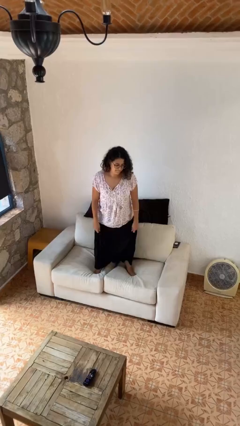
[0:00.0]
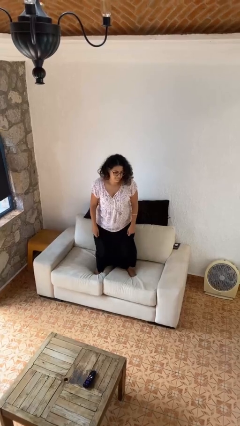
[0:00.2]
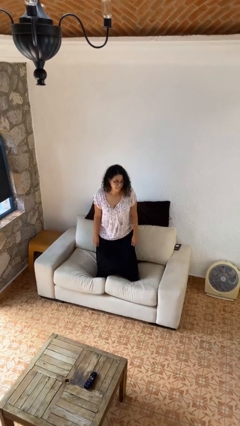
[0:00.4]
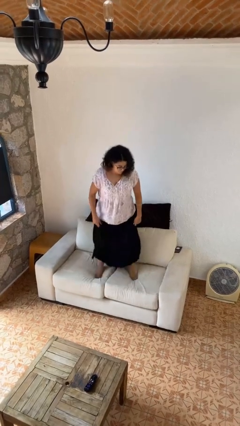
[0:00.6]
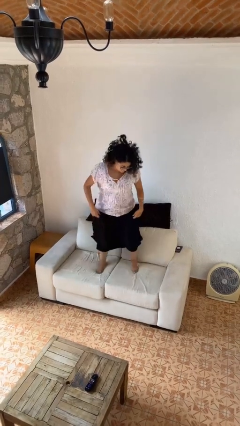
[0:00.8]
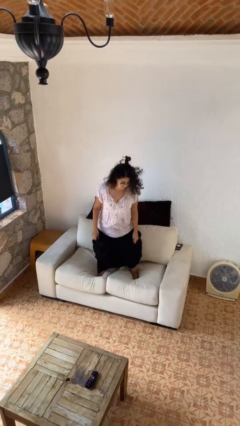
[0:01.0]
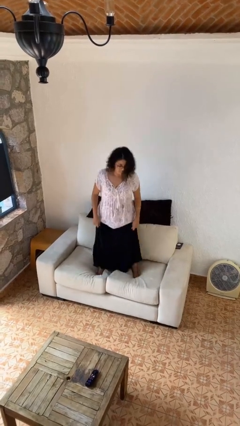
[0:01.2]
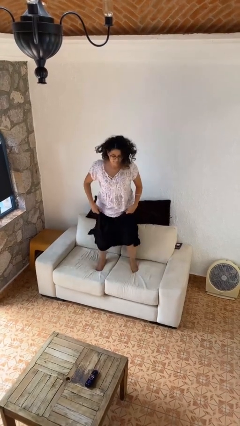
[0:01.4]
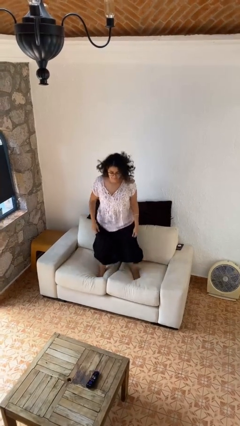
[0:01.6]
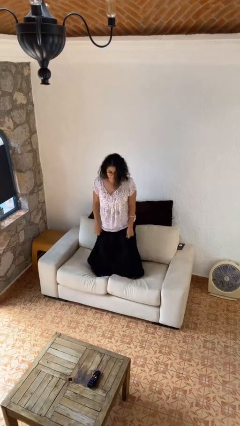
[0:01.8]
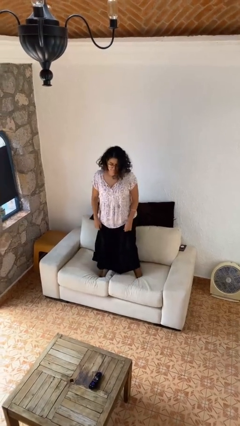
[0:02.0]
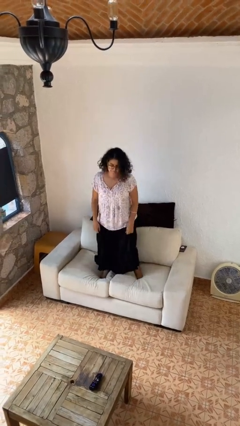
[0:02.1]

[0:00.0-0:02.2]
person jumps on couch

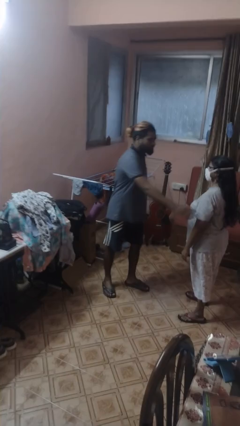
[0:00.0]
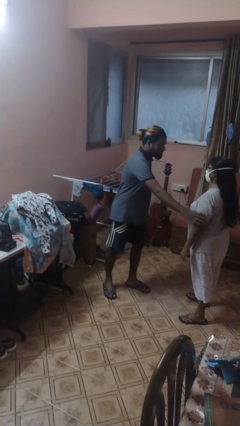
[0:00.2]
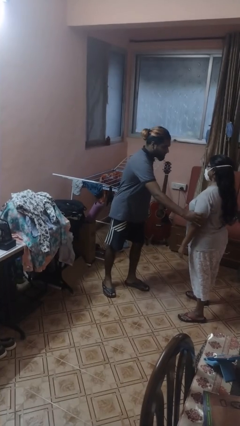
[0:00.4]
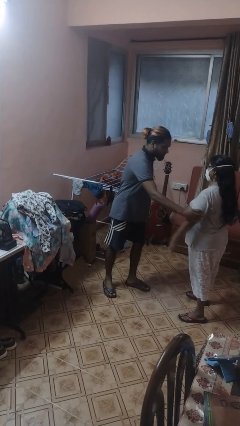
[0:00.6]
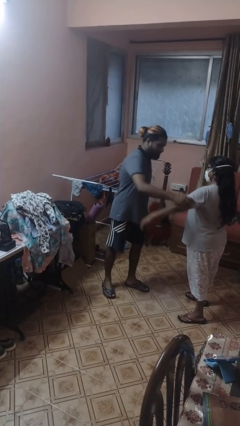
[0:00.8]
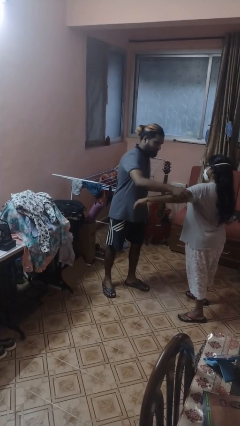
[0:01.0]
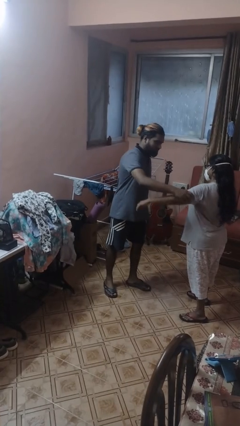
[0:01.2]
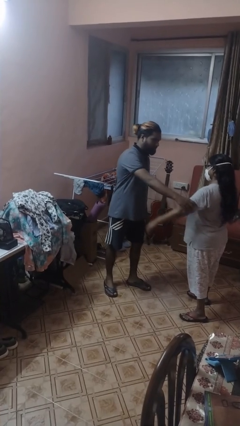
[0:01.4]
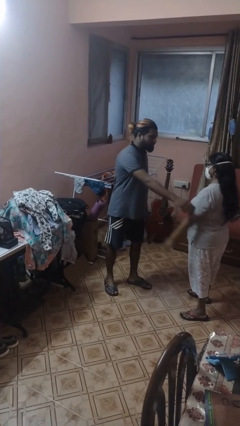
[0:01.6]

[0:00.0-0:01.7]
person grabs person by bicep

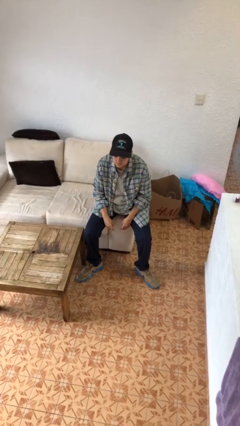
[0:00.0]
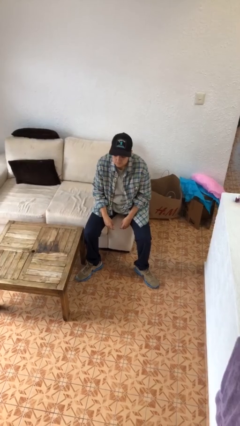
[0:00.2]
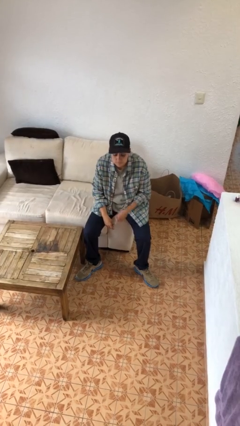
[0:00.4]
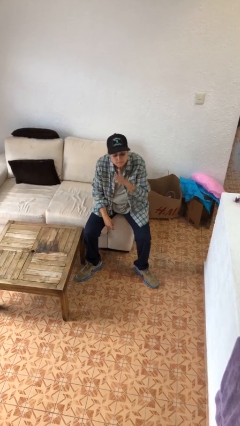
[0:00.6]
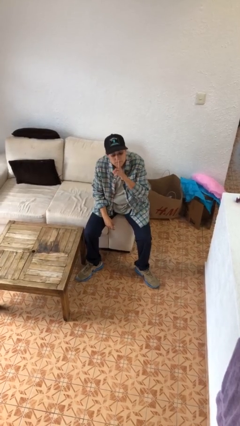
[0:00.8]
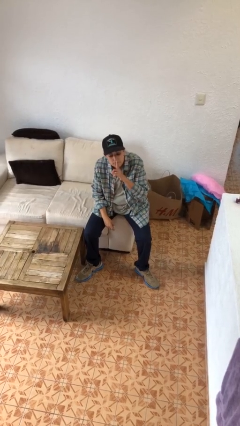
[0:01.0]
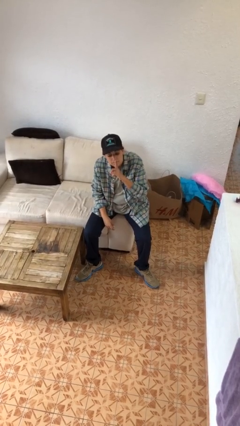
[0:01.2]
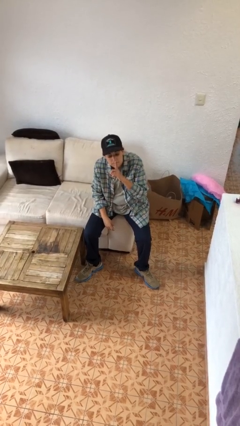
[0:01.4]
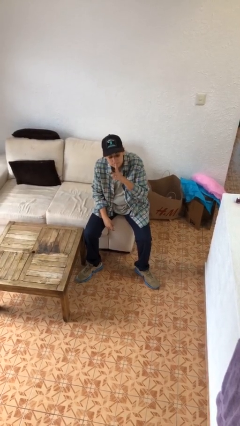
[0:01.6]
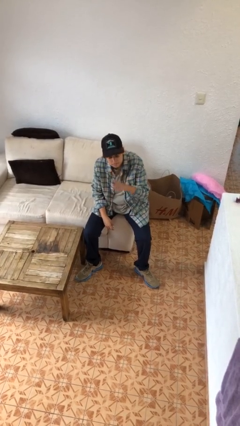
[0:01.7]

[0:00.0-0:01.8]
person gestures be quiet

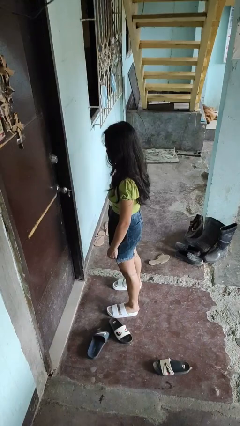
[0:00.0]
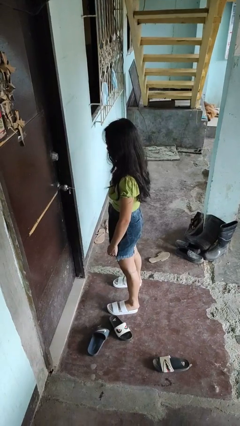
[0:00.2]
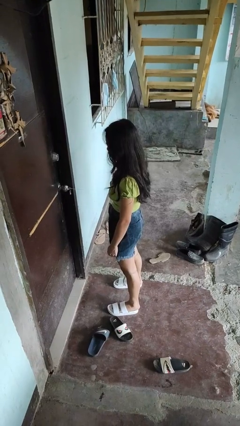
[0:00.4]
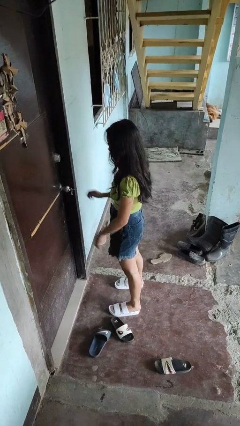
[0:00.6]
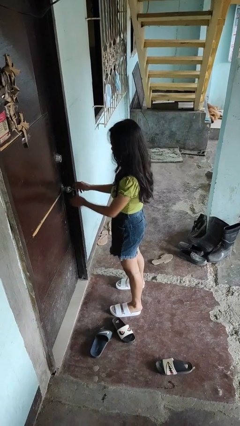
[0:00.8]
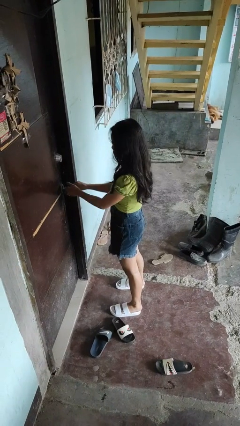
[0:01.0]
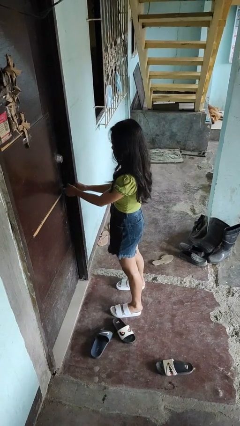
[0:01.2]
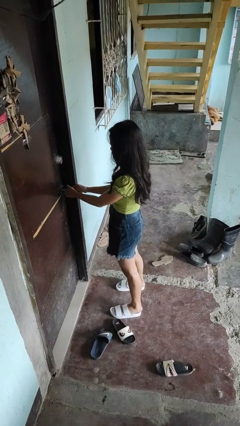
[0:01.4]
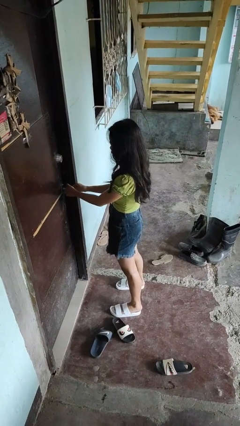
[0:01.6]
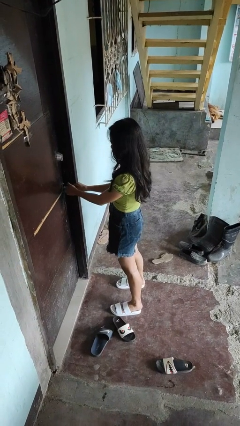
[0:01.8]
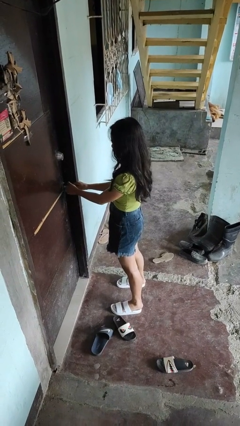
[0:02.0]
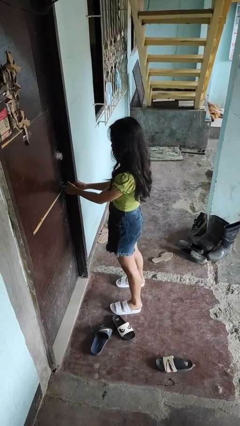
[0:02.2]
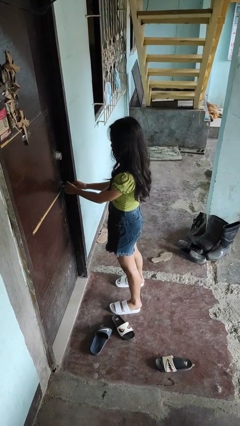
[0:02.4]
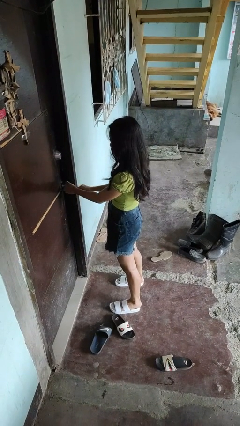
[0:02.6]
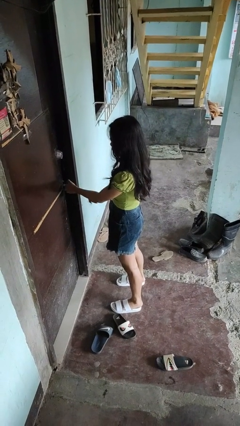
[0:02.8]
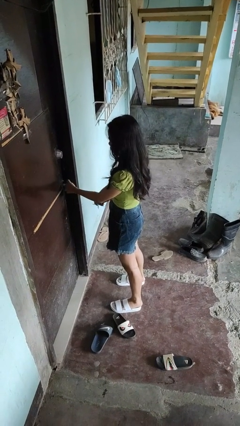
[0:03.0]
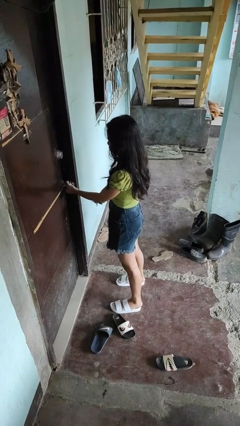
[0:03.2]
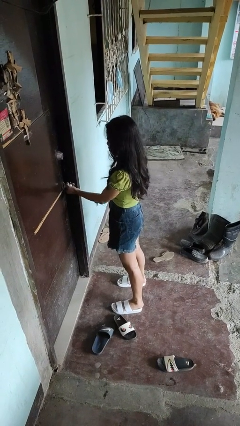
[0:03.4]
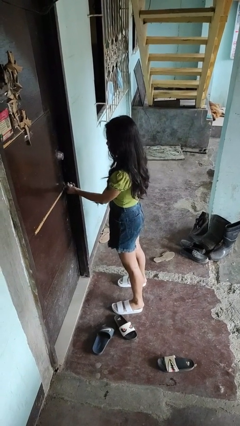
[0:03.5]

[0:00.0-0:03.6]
person unlocks door with keys

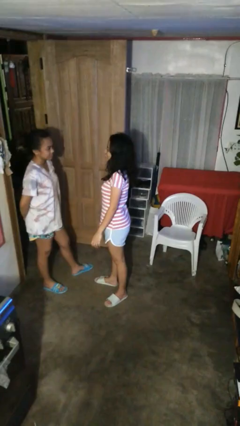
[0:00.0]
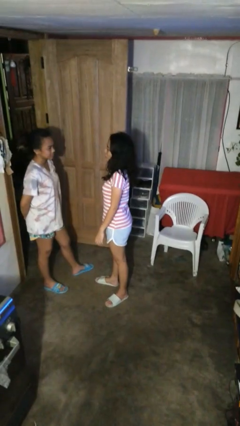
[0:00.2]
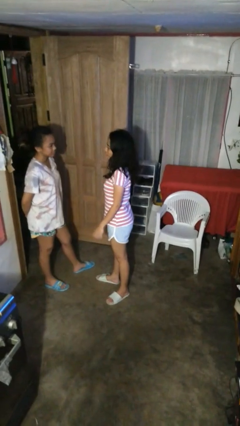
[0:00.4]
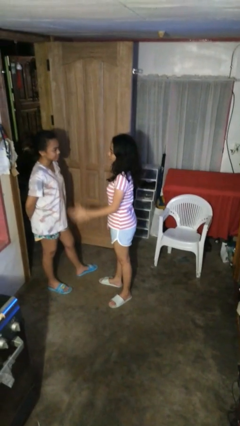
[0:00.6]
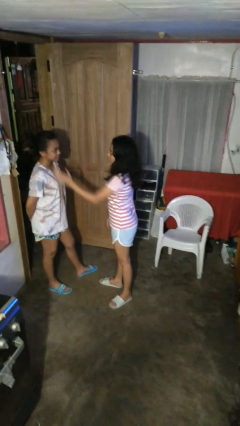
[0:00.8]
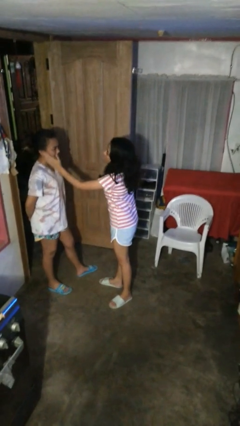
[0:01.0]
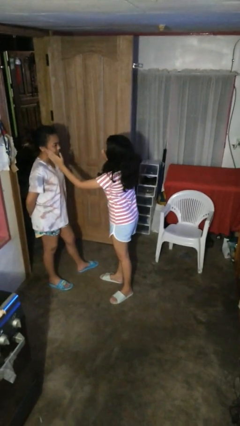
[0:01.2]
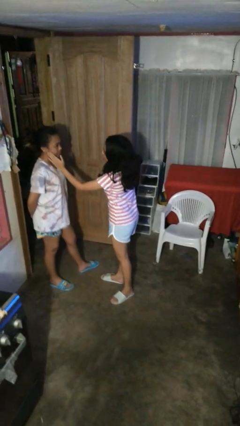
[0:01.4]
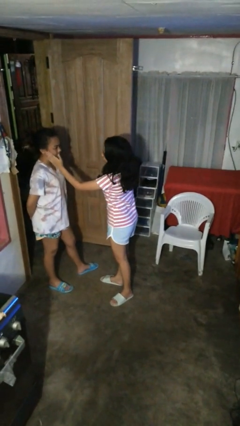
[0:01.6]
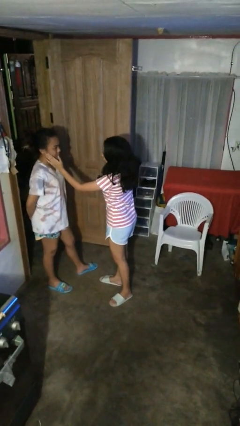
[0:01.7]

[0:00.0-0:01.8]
person touches face of person

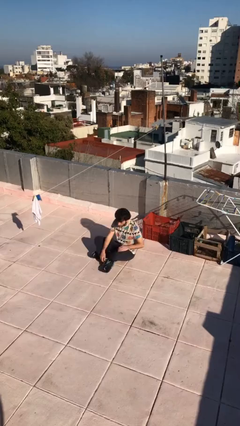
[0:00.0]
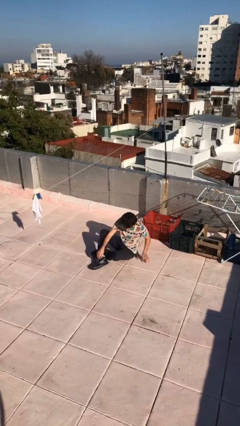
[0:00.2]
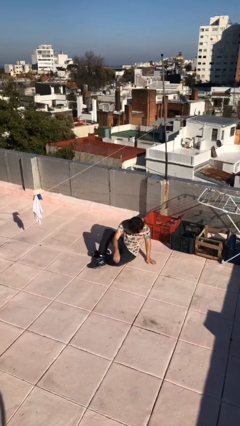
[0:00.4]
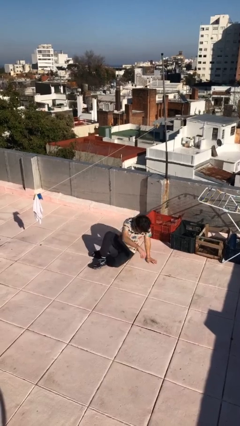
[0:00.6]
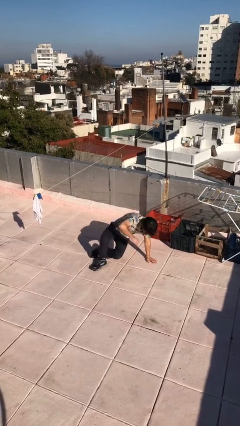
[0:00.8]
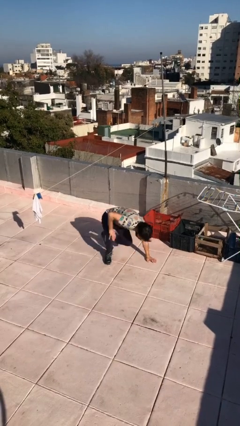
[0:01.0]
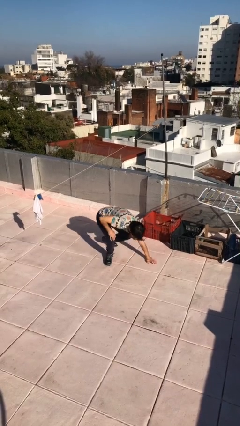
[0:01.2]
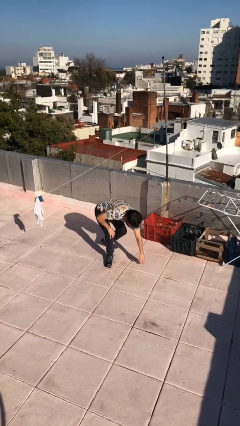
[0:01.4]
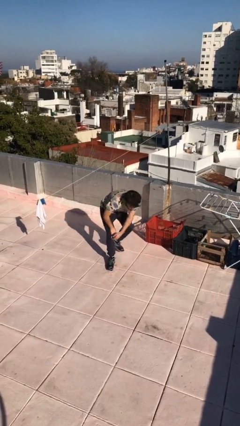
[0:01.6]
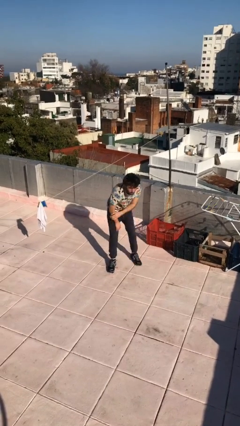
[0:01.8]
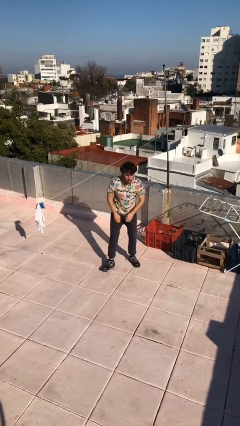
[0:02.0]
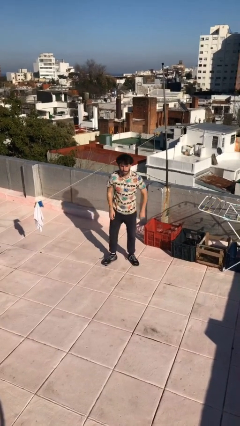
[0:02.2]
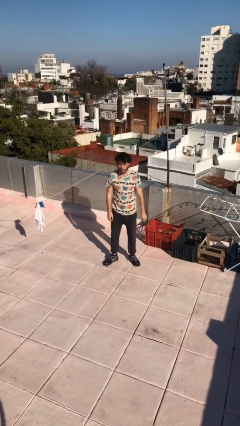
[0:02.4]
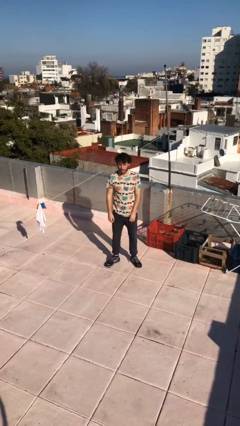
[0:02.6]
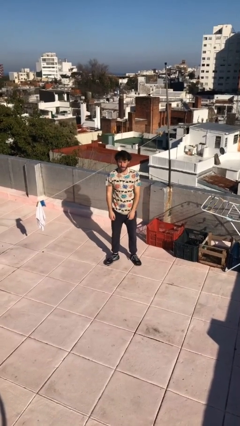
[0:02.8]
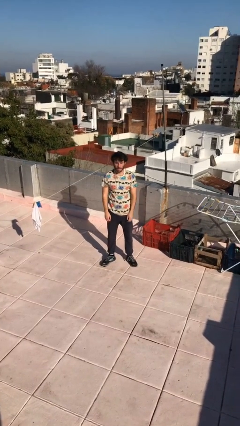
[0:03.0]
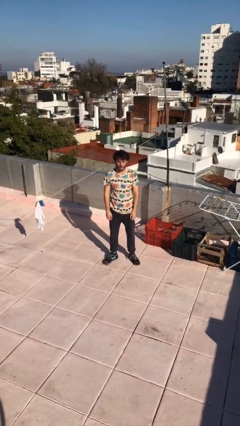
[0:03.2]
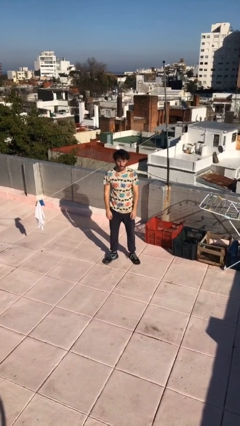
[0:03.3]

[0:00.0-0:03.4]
person stands up from floor

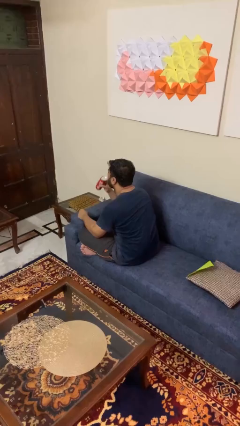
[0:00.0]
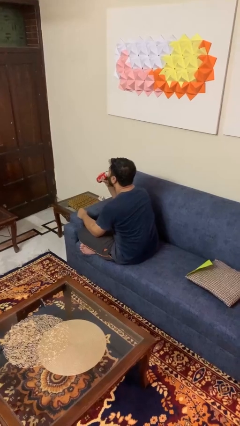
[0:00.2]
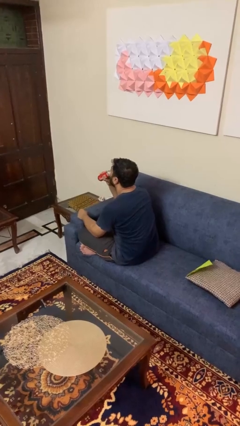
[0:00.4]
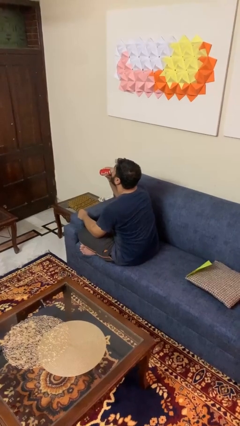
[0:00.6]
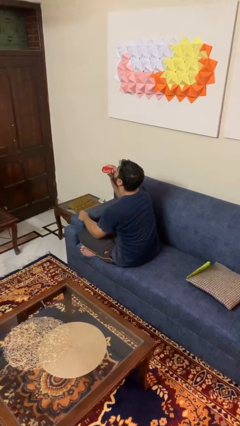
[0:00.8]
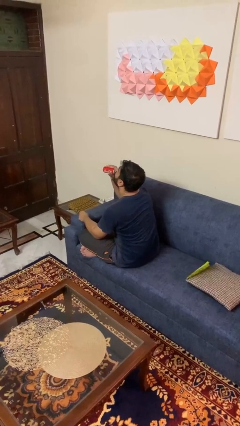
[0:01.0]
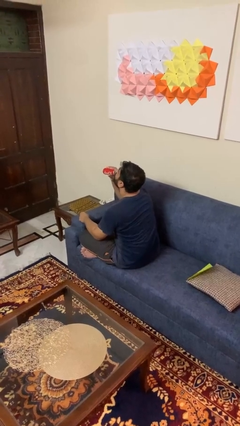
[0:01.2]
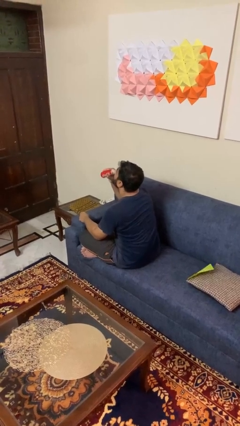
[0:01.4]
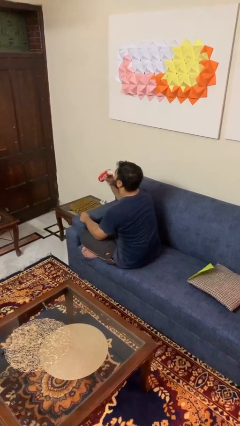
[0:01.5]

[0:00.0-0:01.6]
person drinks from beverage can

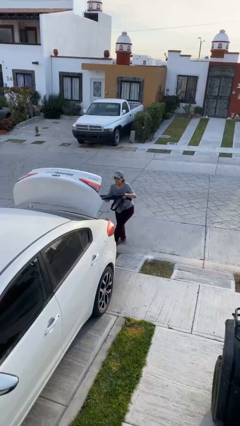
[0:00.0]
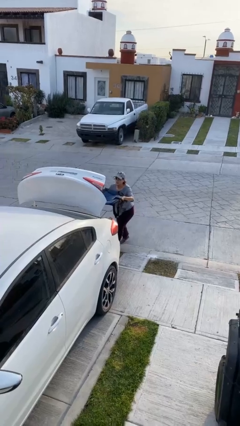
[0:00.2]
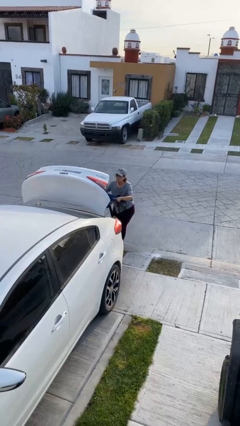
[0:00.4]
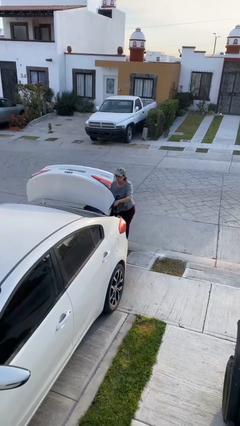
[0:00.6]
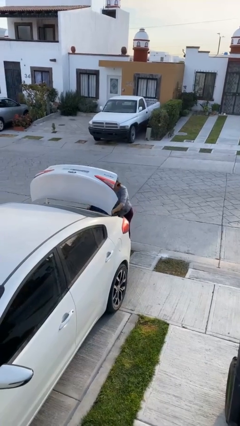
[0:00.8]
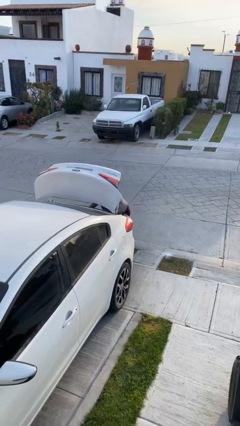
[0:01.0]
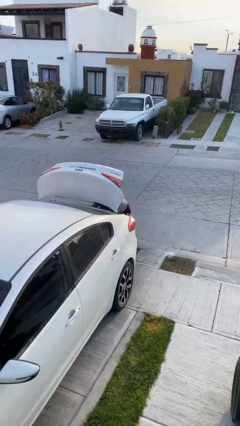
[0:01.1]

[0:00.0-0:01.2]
person loads car
